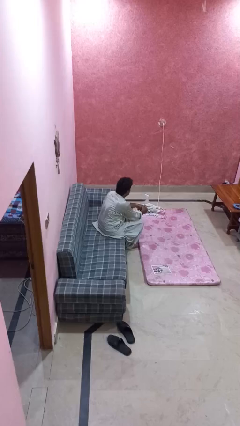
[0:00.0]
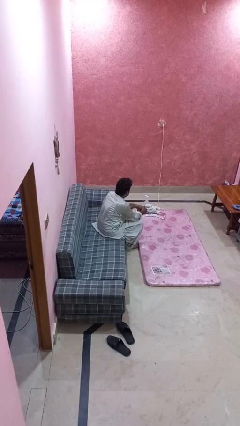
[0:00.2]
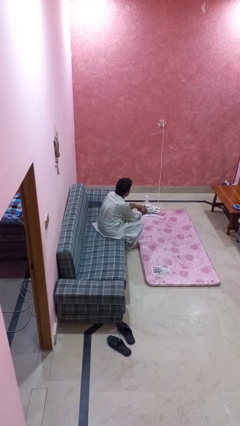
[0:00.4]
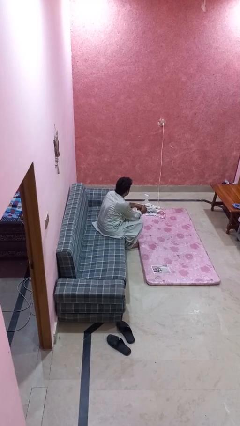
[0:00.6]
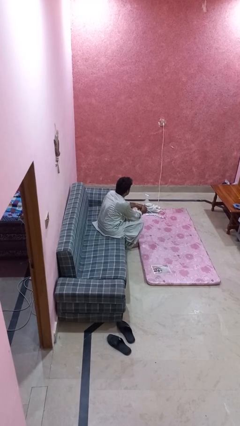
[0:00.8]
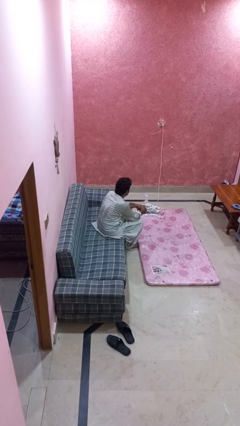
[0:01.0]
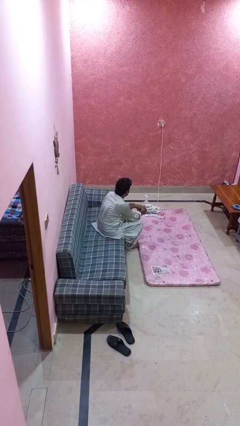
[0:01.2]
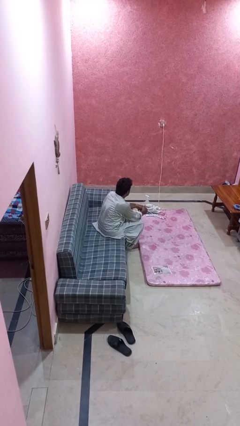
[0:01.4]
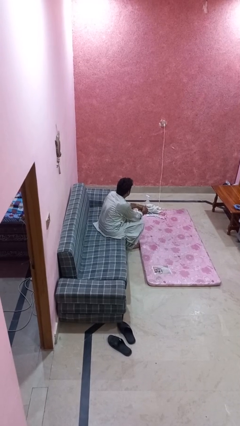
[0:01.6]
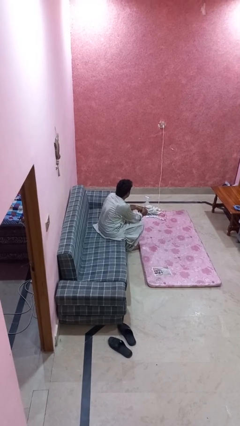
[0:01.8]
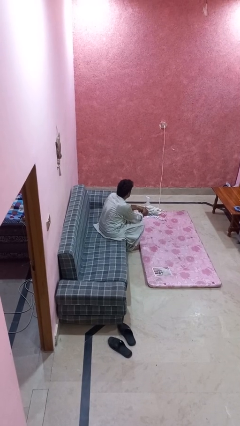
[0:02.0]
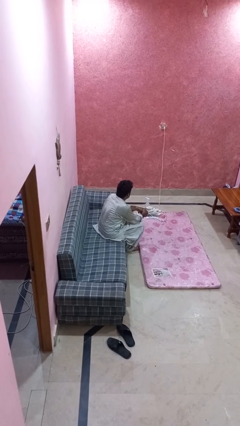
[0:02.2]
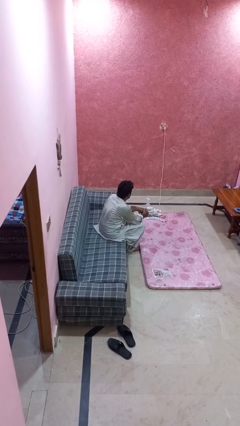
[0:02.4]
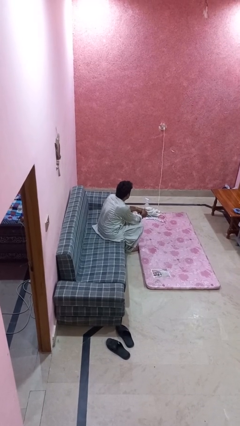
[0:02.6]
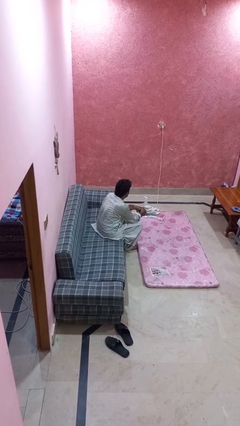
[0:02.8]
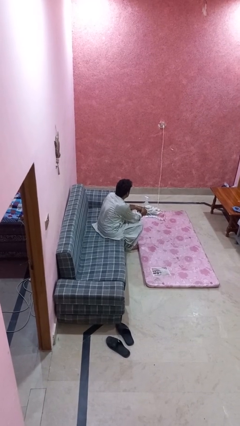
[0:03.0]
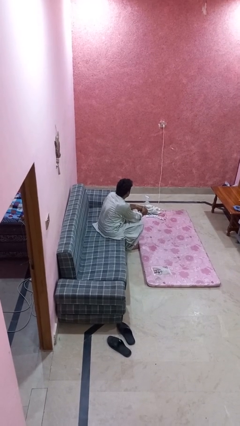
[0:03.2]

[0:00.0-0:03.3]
person sits down

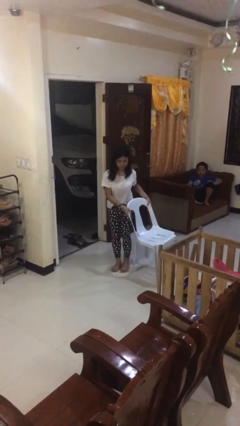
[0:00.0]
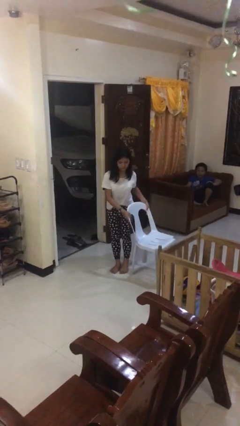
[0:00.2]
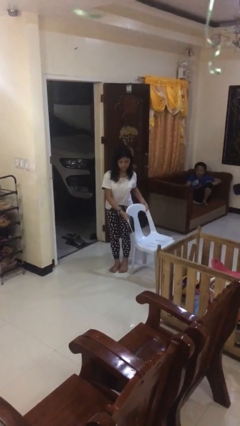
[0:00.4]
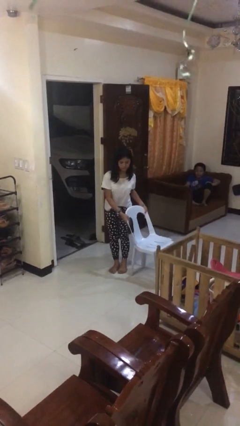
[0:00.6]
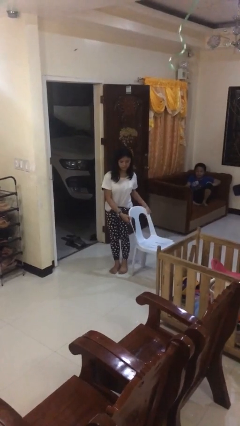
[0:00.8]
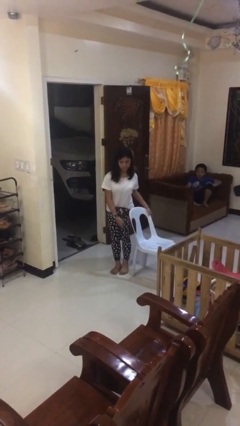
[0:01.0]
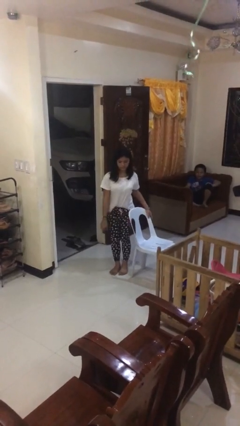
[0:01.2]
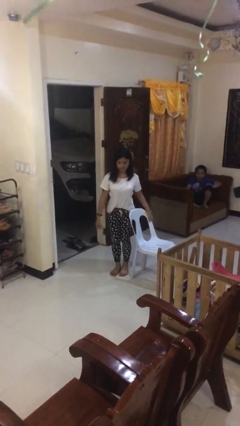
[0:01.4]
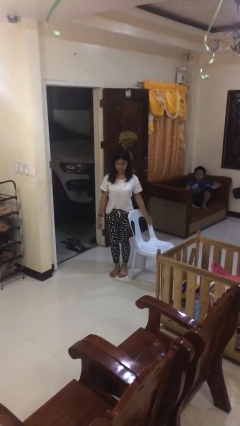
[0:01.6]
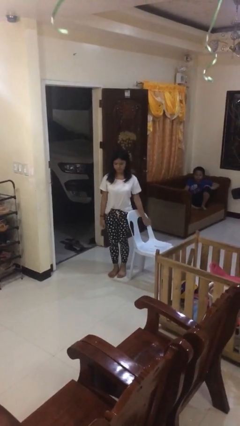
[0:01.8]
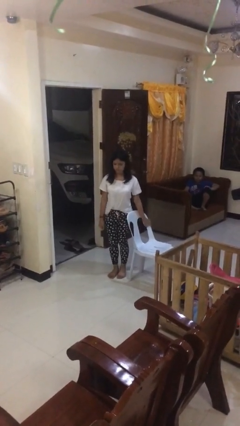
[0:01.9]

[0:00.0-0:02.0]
person puts down object on floor

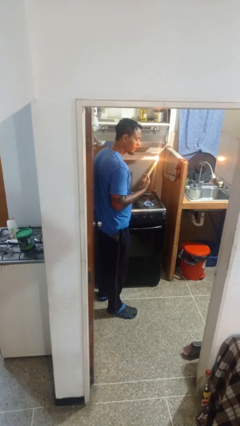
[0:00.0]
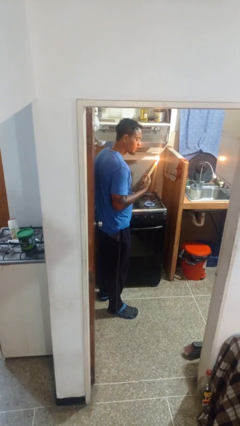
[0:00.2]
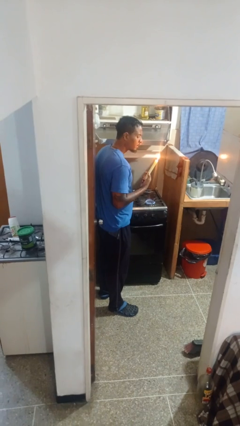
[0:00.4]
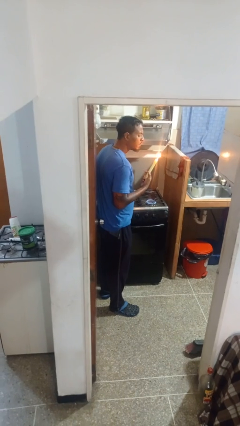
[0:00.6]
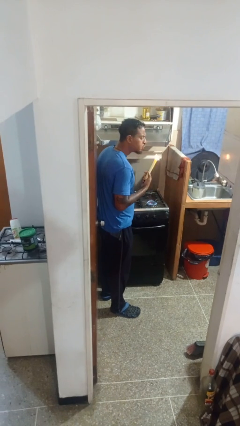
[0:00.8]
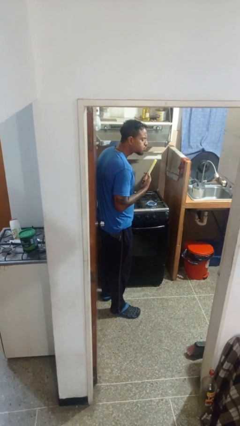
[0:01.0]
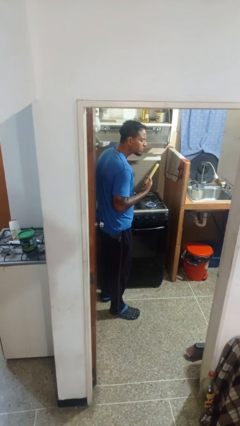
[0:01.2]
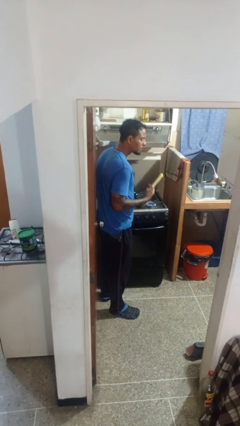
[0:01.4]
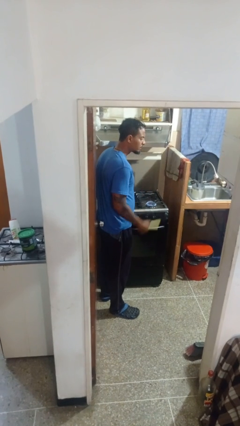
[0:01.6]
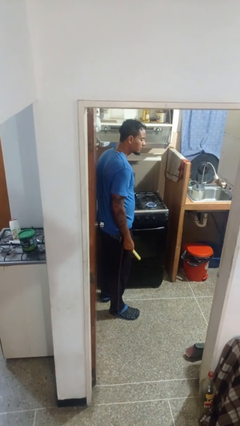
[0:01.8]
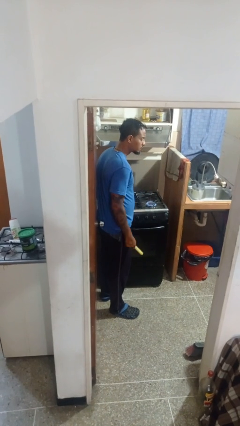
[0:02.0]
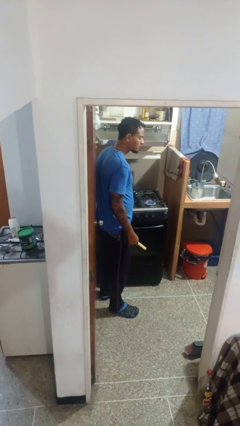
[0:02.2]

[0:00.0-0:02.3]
person extinguishes candle

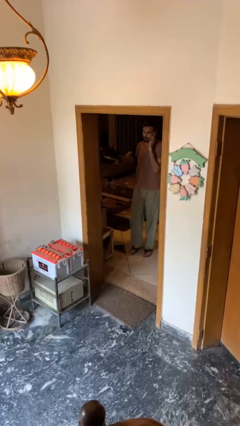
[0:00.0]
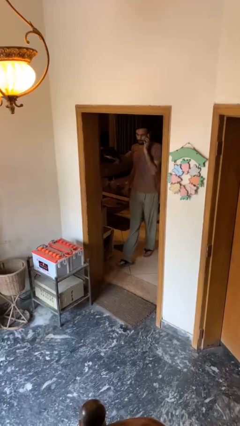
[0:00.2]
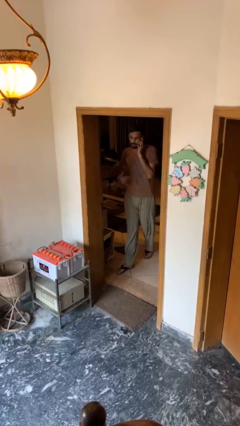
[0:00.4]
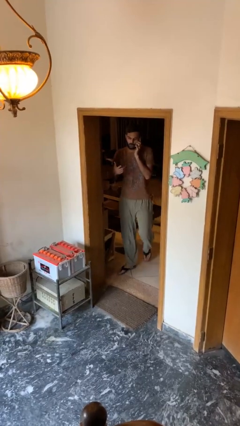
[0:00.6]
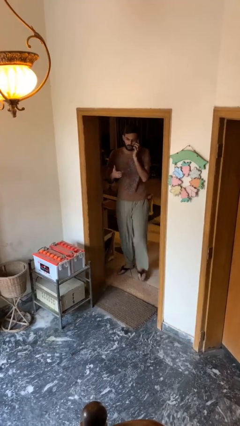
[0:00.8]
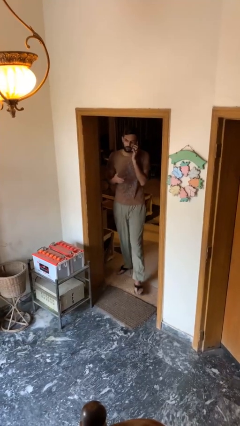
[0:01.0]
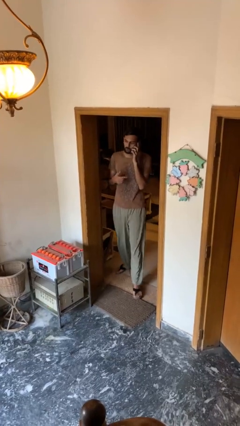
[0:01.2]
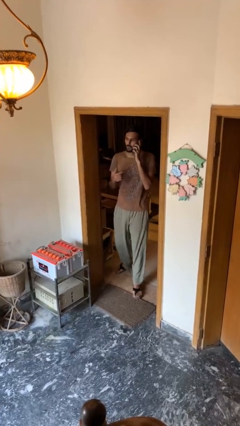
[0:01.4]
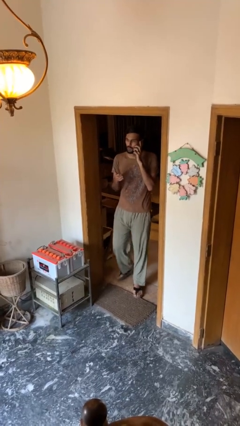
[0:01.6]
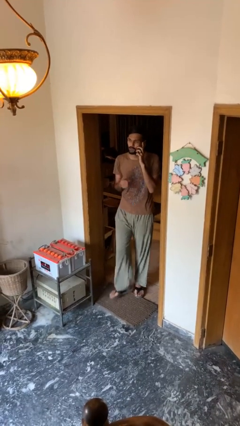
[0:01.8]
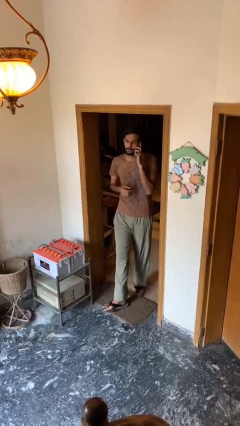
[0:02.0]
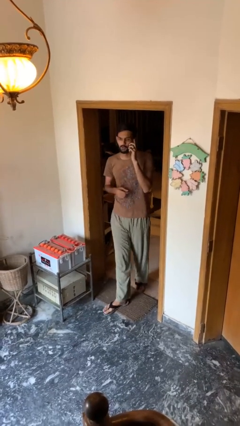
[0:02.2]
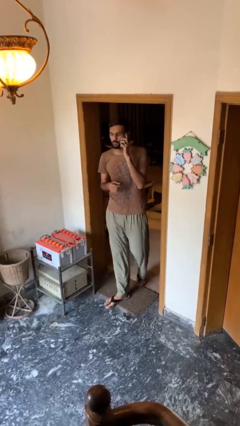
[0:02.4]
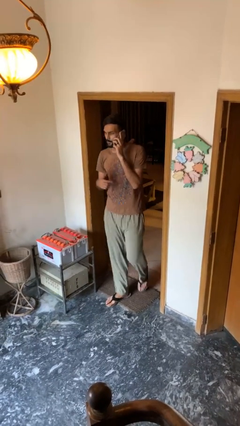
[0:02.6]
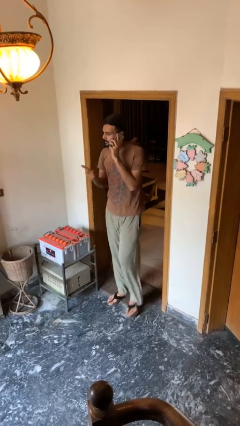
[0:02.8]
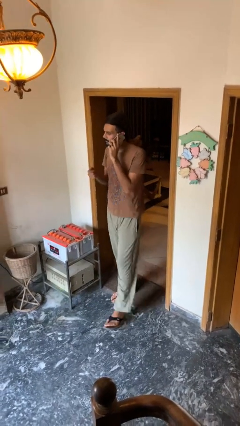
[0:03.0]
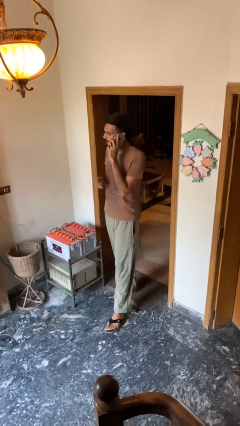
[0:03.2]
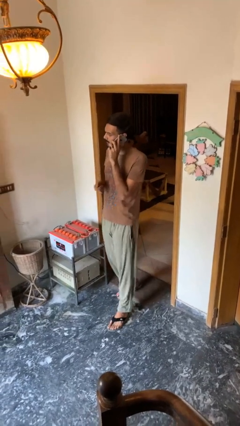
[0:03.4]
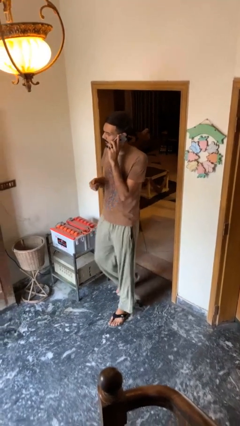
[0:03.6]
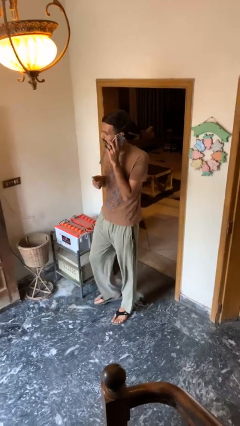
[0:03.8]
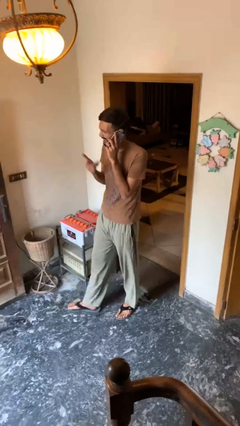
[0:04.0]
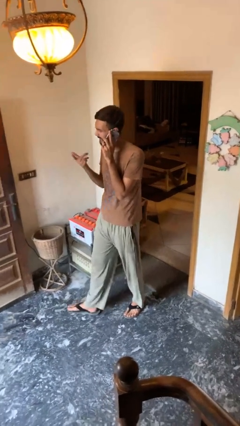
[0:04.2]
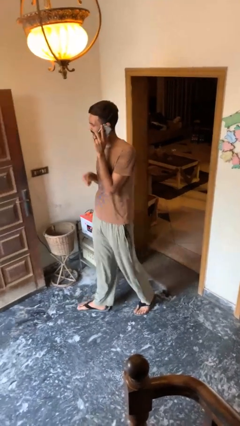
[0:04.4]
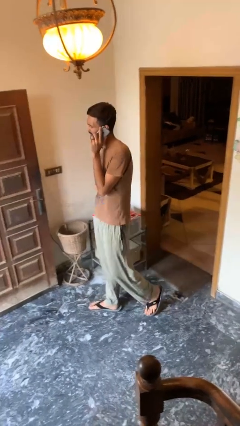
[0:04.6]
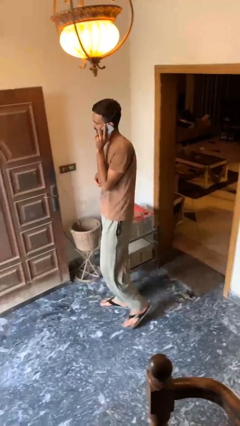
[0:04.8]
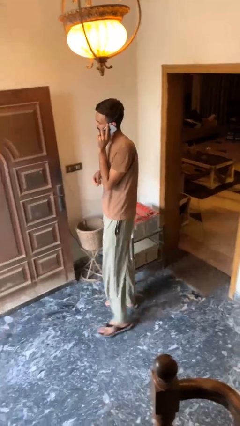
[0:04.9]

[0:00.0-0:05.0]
person enters scene through structure

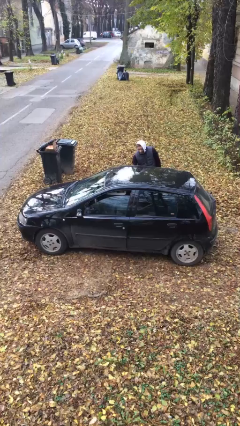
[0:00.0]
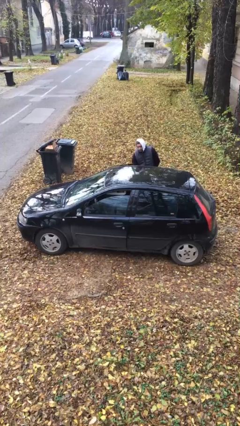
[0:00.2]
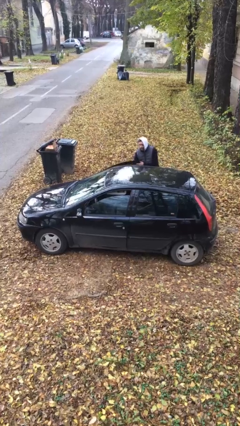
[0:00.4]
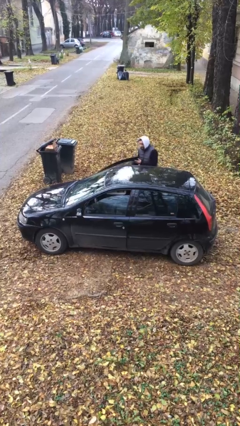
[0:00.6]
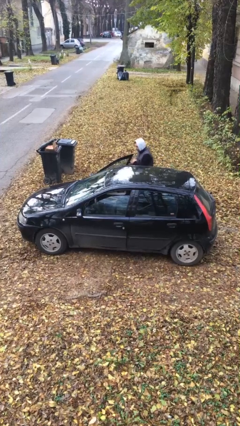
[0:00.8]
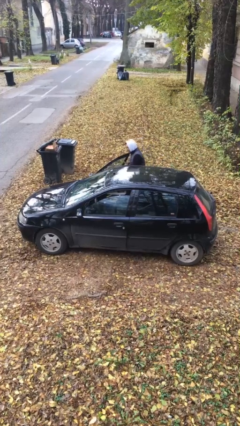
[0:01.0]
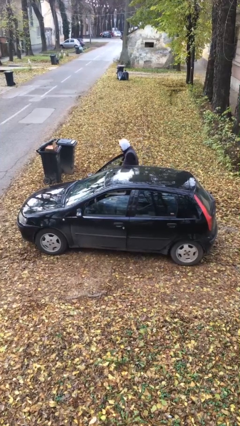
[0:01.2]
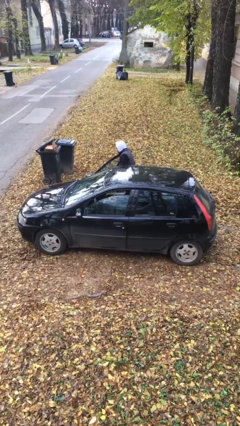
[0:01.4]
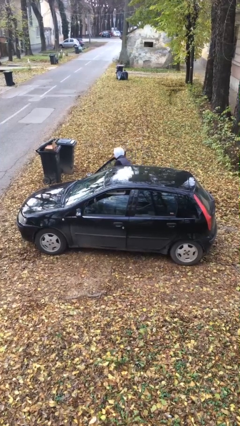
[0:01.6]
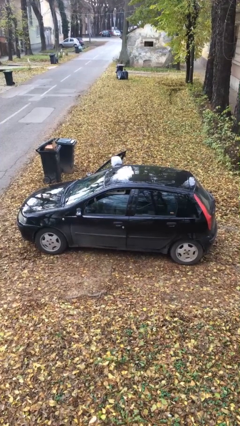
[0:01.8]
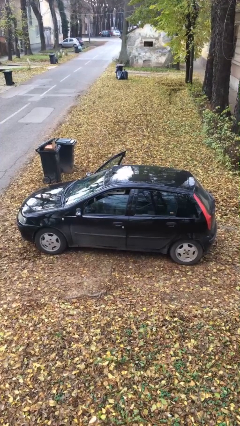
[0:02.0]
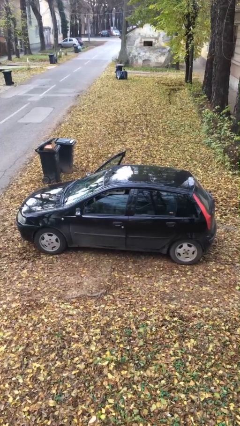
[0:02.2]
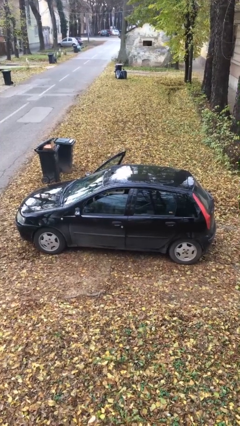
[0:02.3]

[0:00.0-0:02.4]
car picks up person

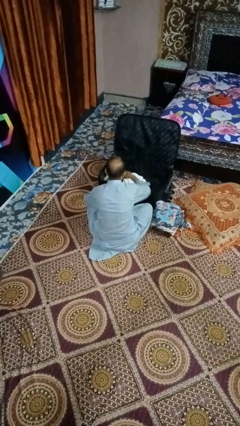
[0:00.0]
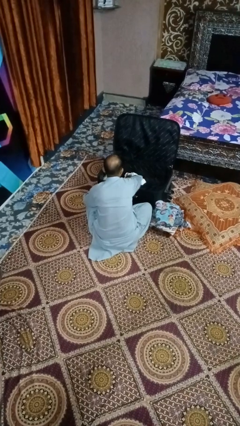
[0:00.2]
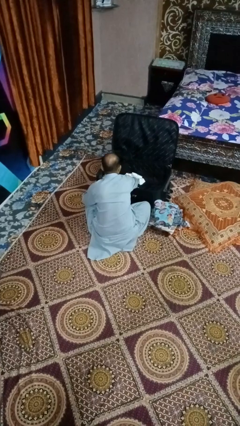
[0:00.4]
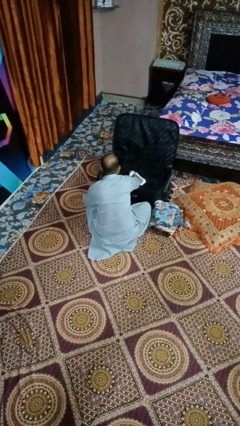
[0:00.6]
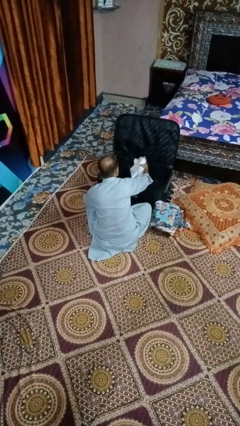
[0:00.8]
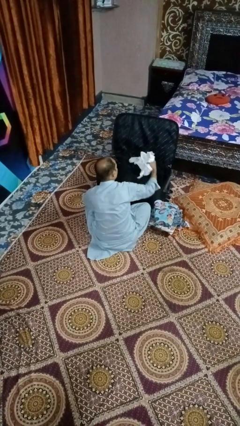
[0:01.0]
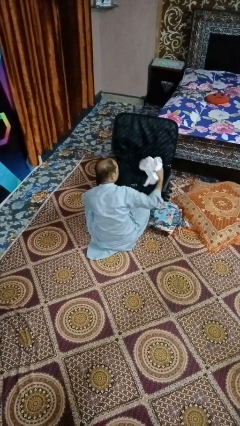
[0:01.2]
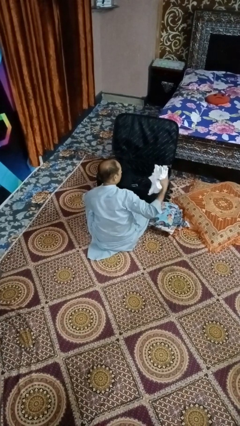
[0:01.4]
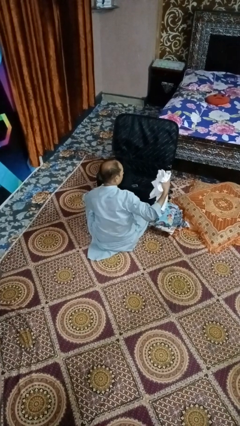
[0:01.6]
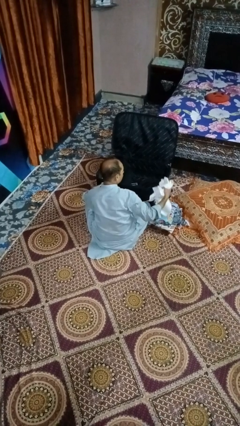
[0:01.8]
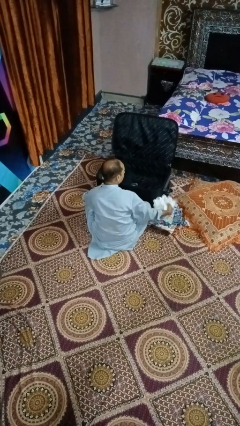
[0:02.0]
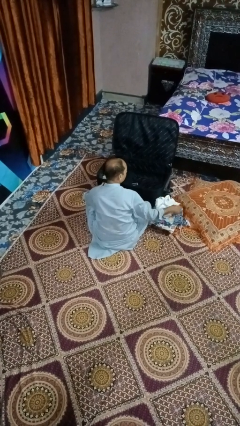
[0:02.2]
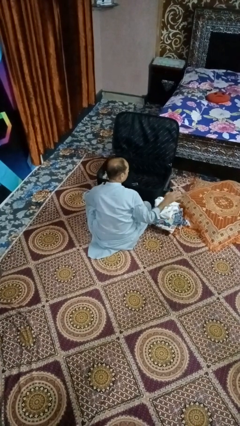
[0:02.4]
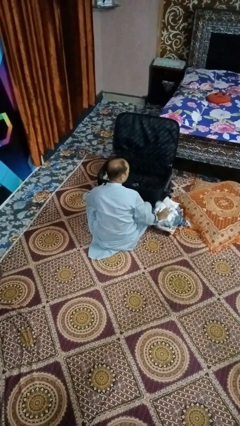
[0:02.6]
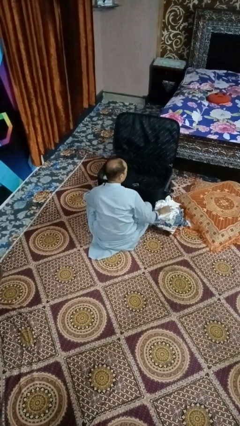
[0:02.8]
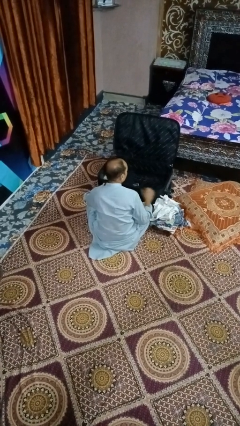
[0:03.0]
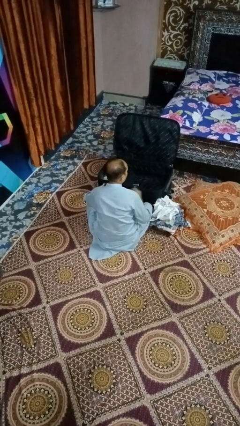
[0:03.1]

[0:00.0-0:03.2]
person unloads clothes from suitcase
